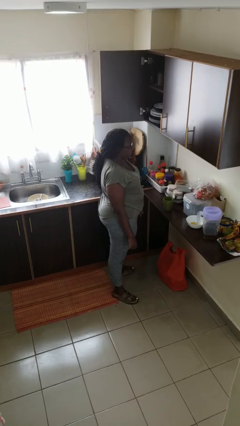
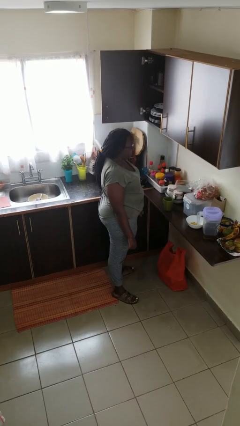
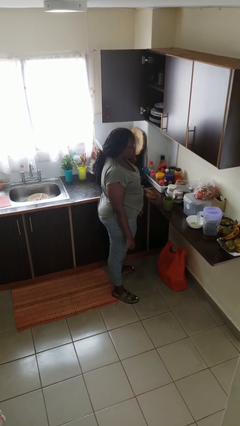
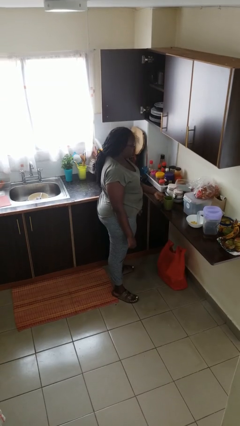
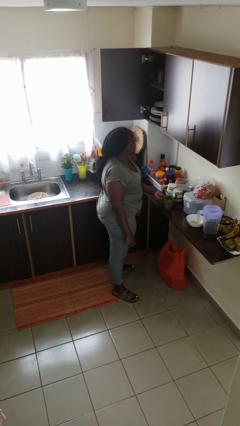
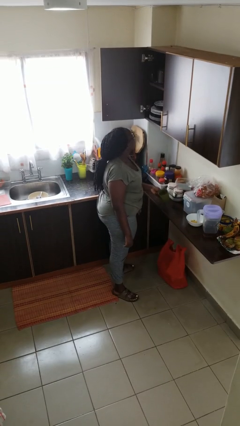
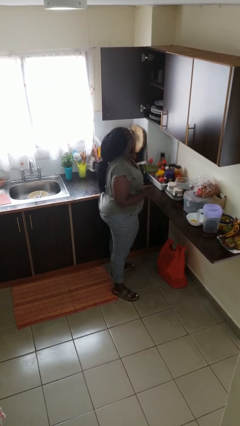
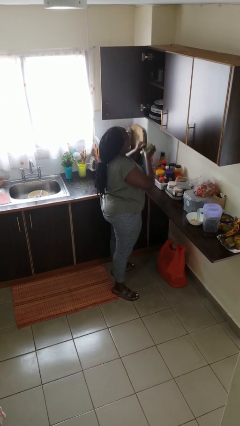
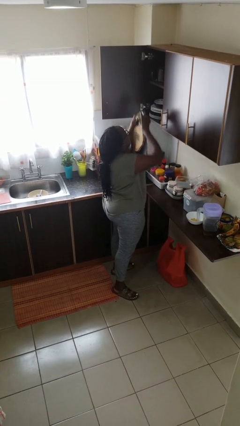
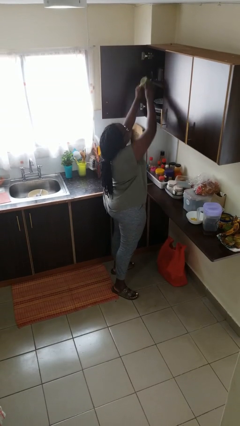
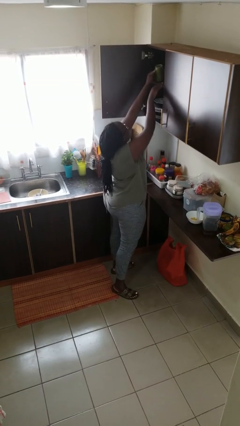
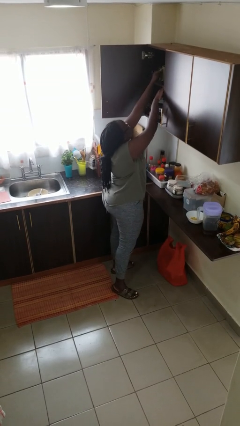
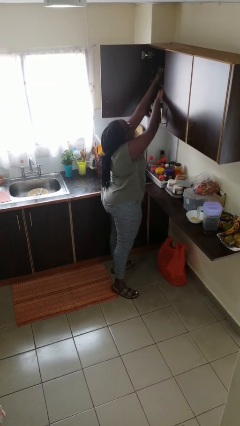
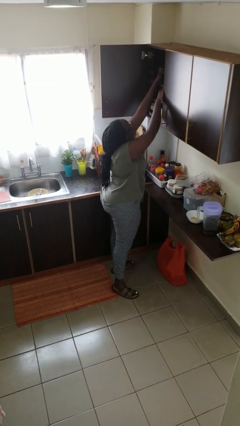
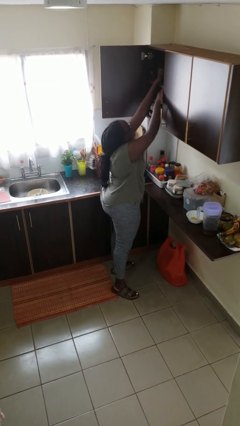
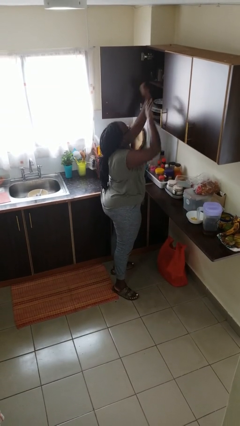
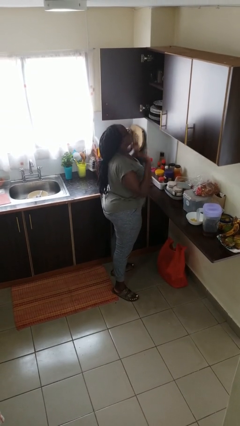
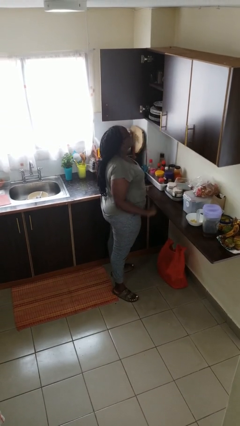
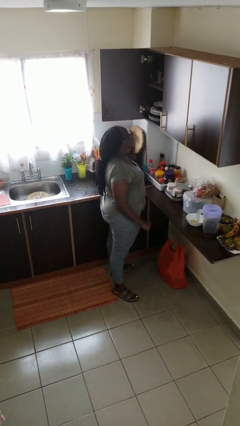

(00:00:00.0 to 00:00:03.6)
person puts object in cabinet

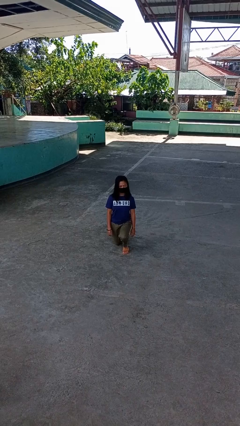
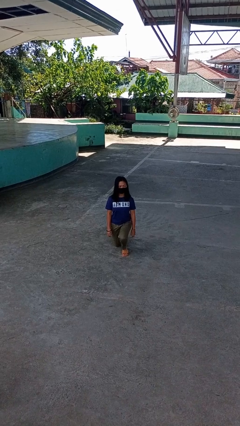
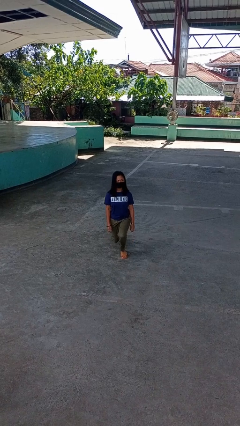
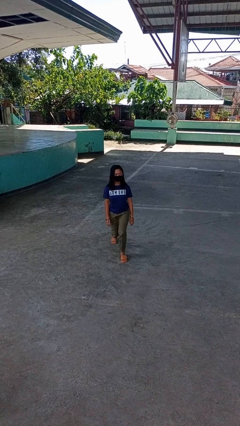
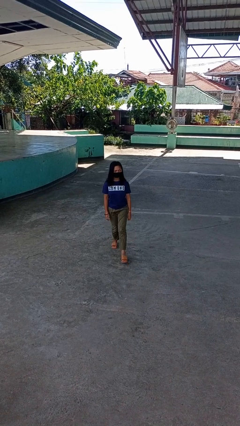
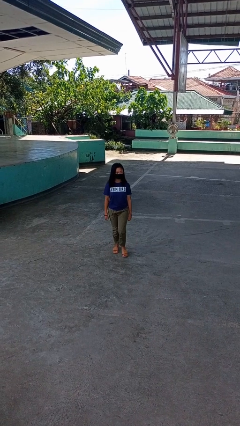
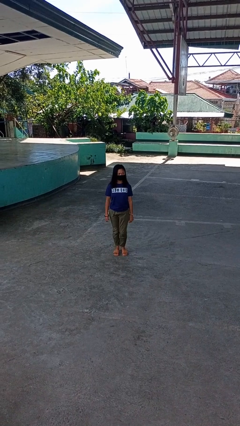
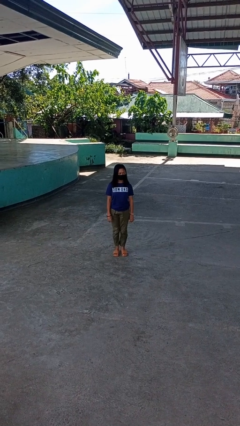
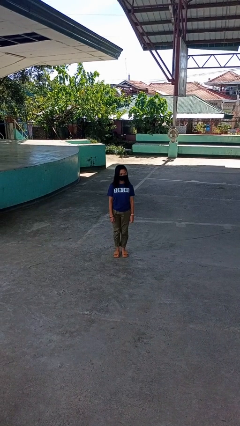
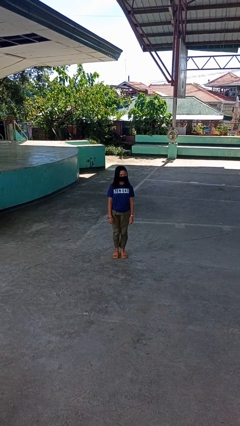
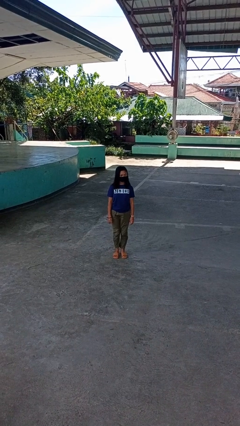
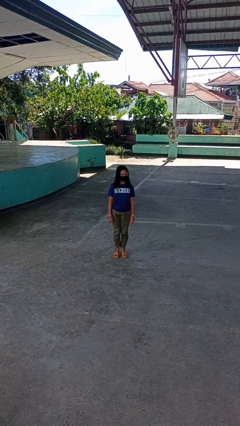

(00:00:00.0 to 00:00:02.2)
person stands up from floor

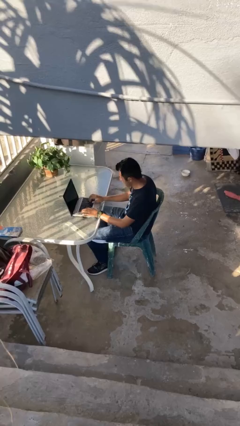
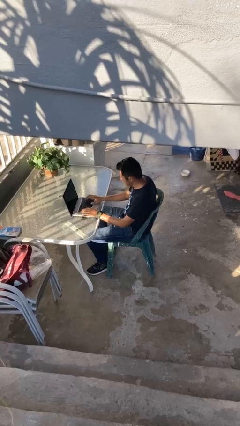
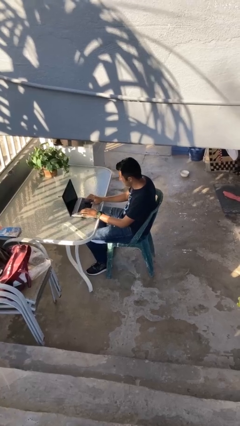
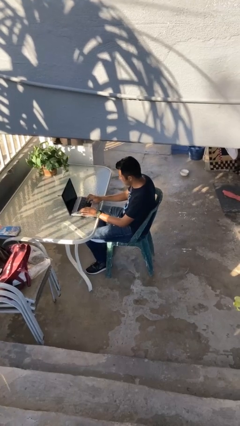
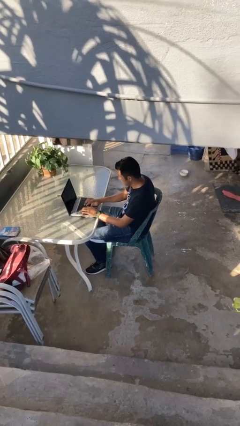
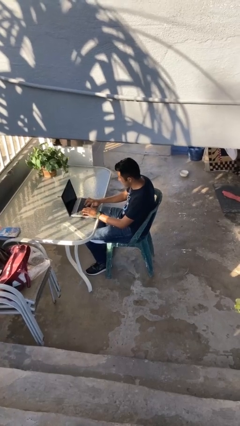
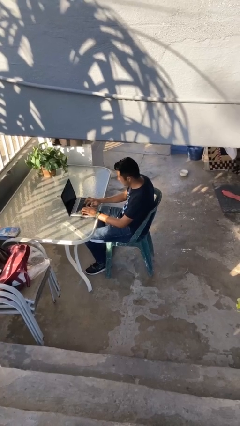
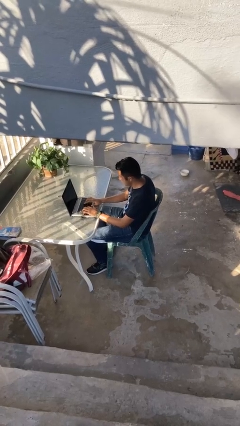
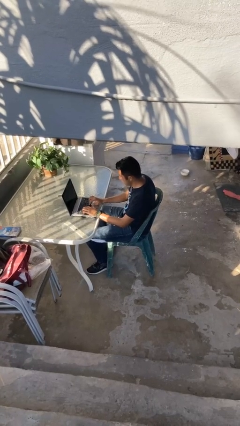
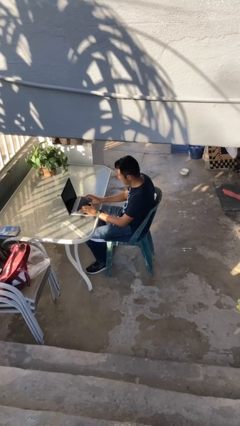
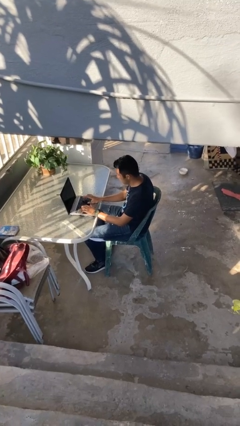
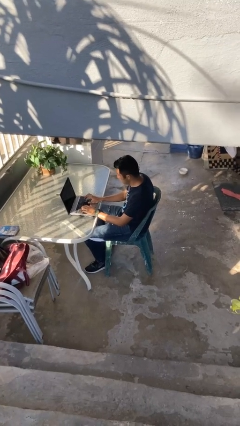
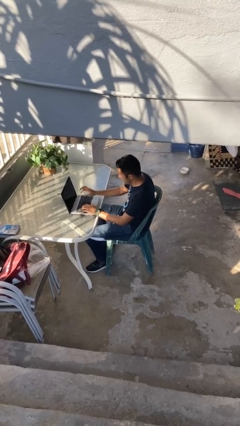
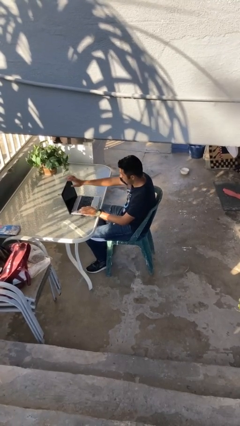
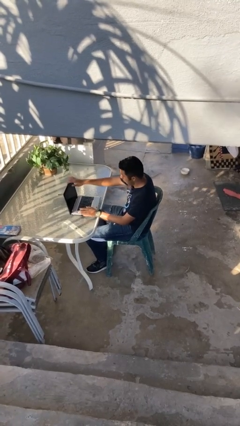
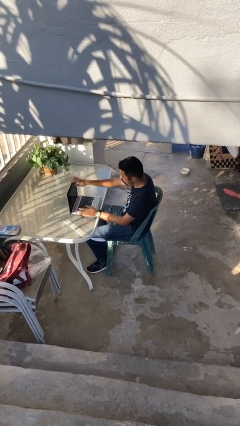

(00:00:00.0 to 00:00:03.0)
person interacts with laptop

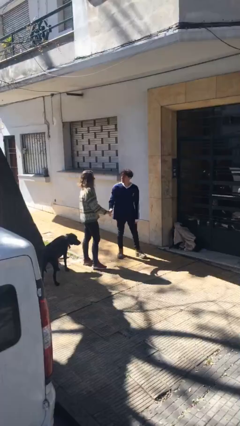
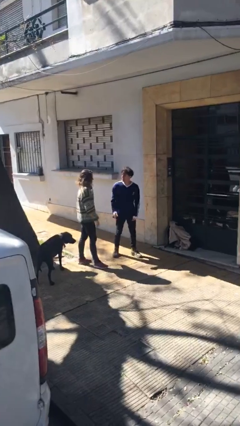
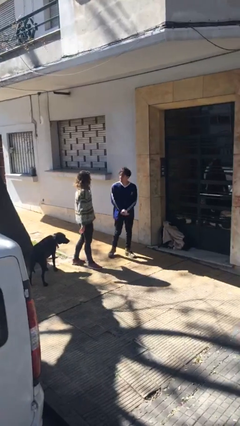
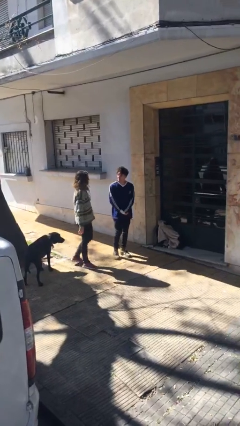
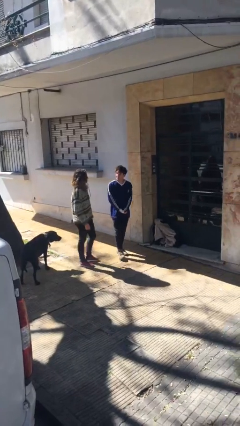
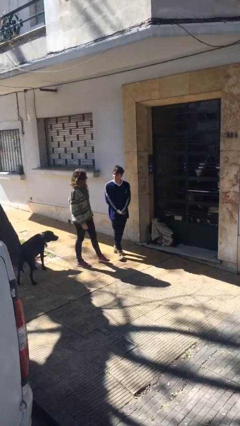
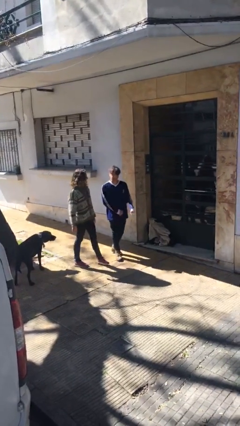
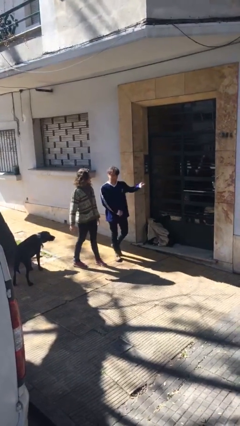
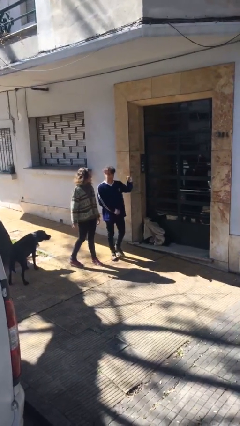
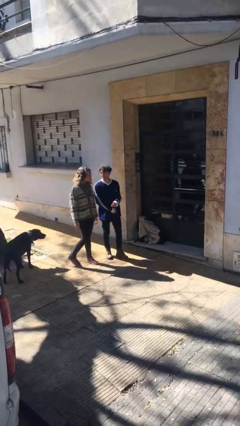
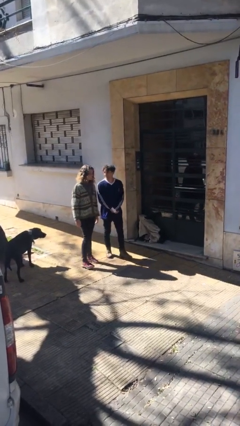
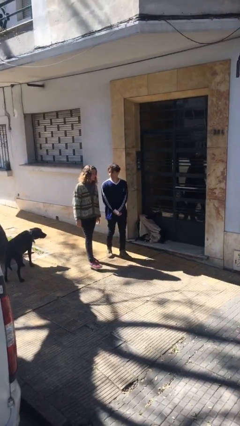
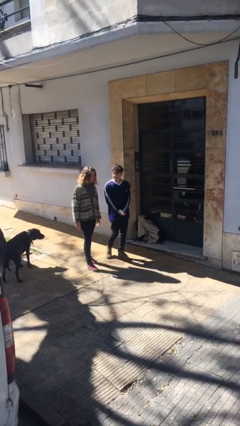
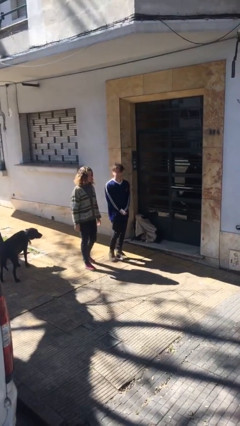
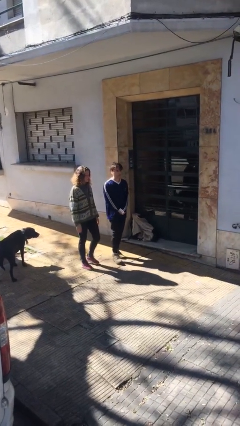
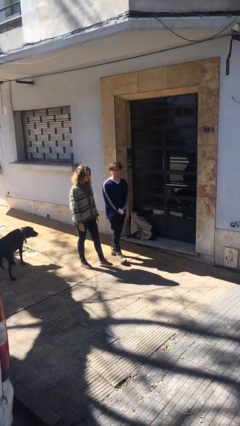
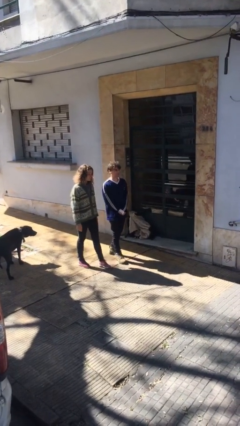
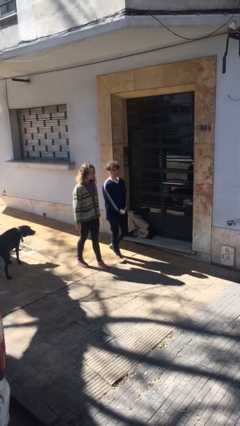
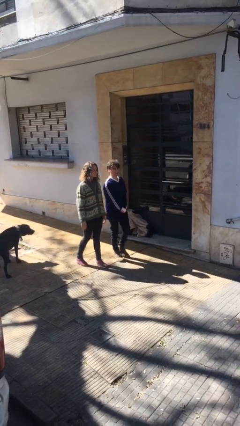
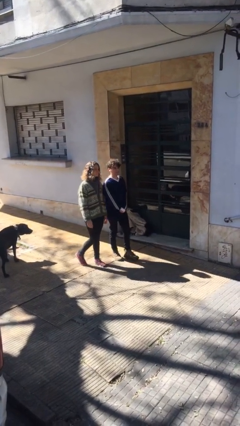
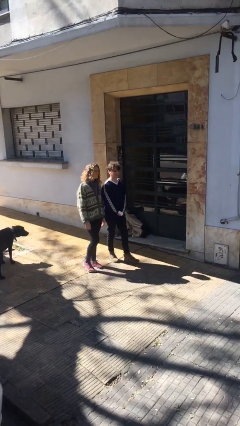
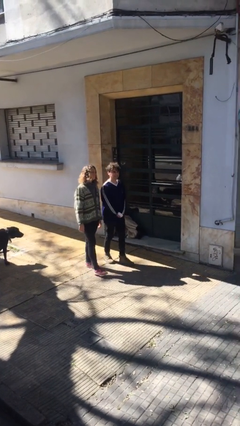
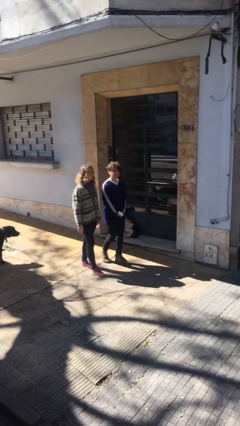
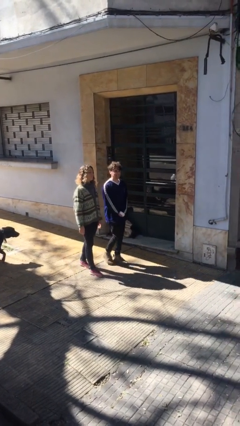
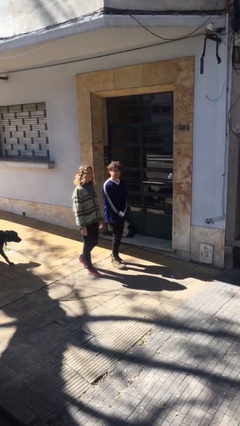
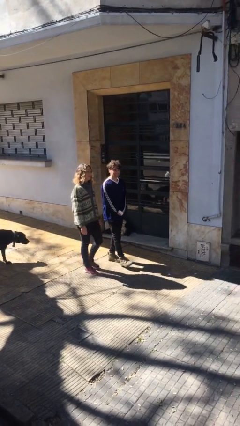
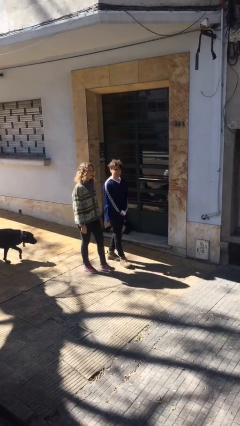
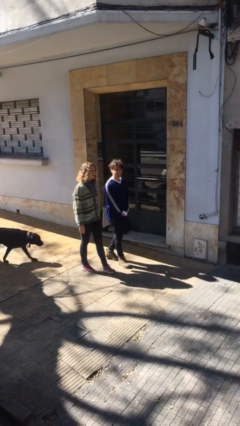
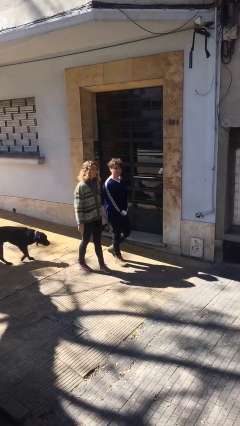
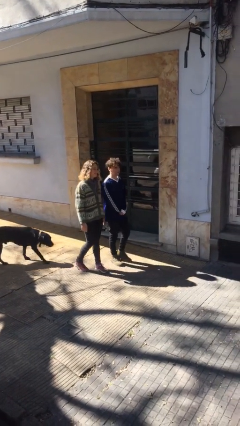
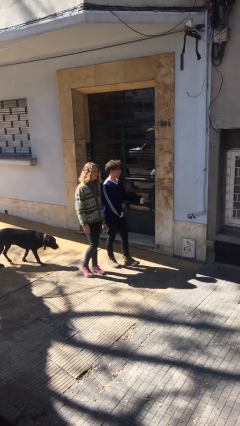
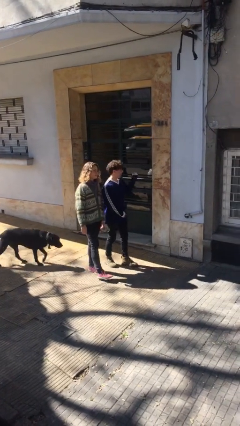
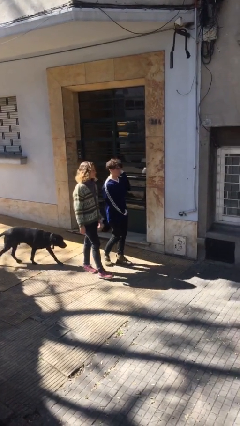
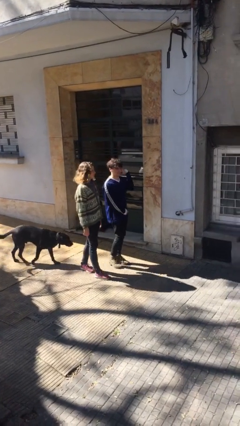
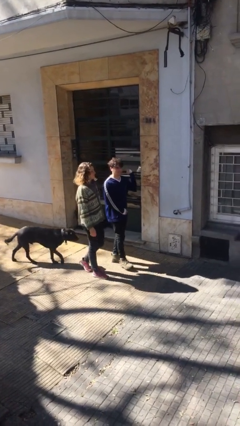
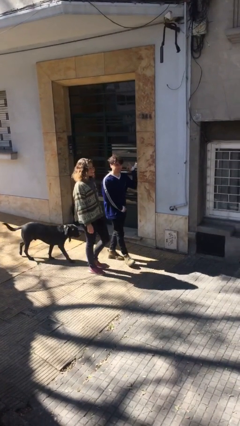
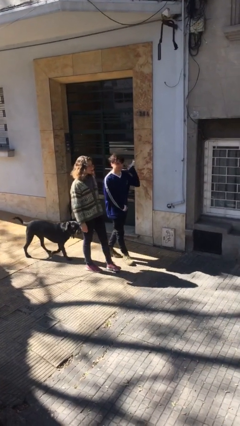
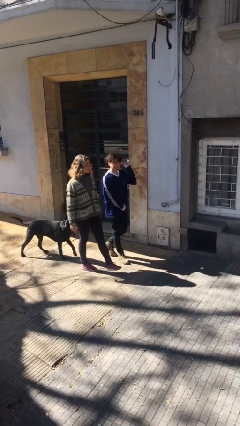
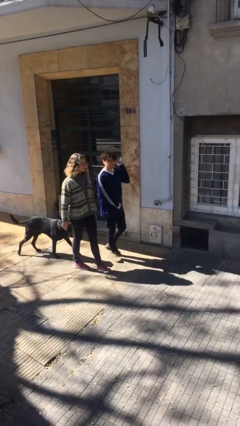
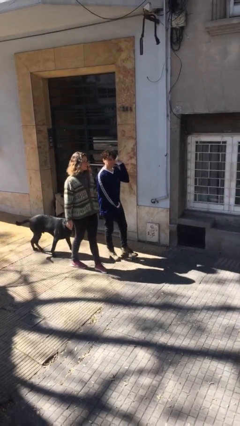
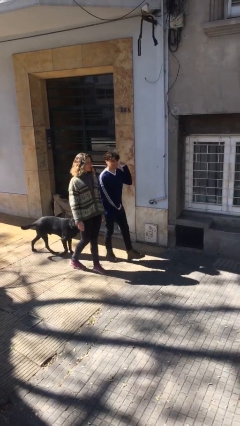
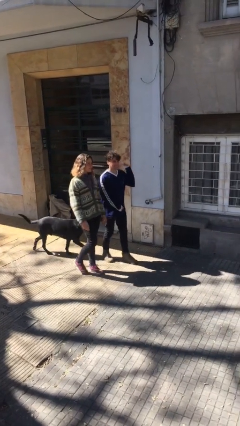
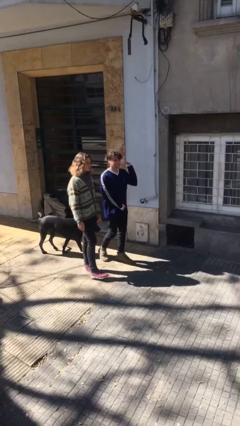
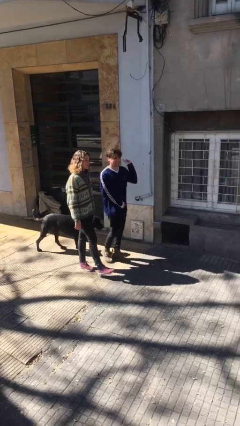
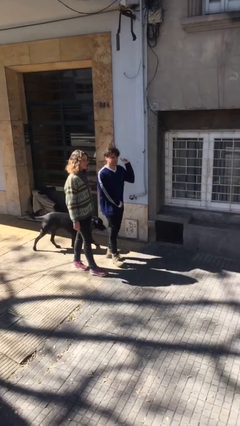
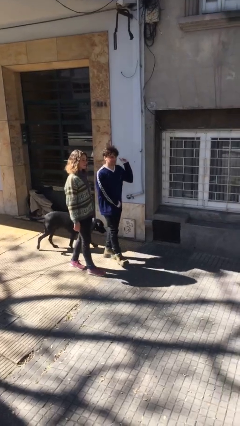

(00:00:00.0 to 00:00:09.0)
person talks to person
